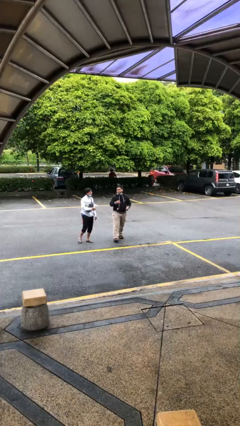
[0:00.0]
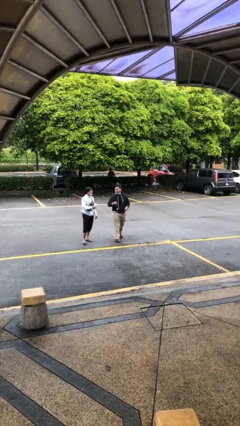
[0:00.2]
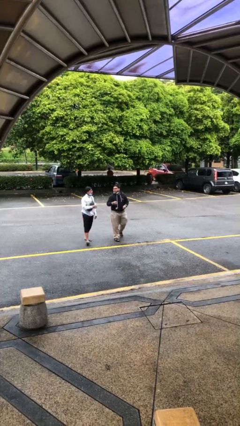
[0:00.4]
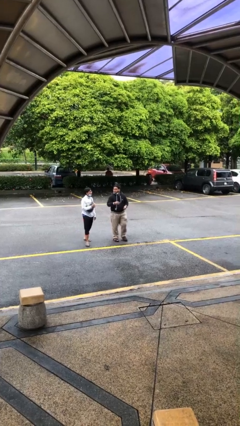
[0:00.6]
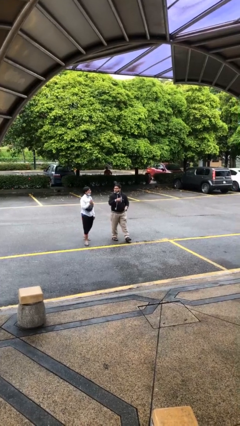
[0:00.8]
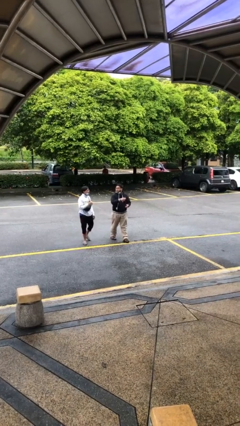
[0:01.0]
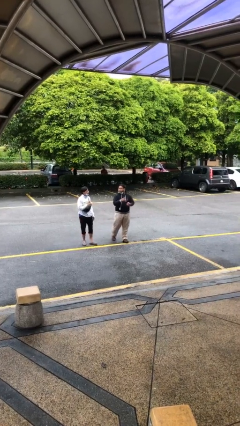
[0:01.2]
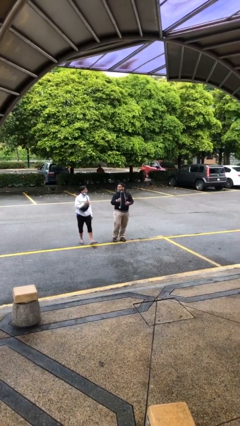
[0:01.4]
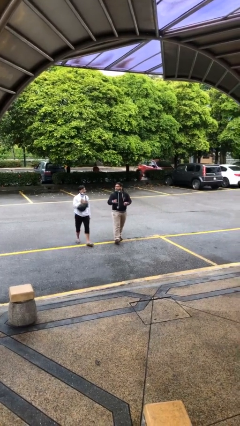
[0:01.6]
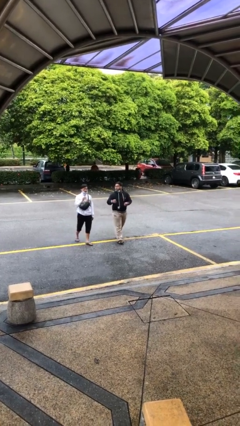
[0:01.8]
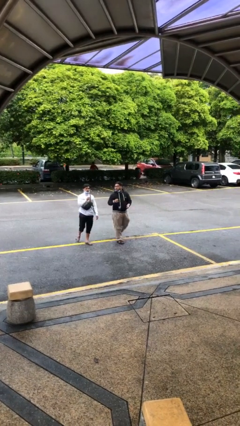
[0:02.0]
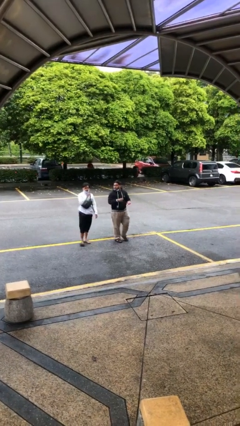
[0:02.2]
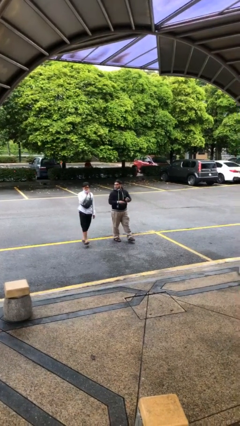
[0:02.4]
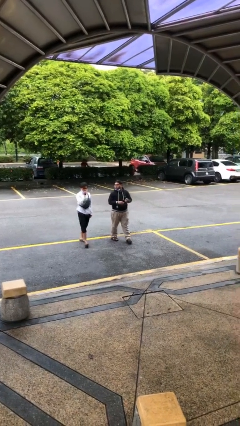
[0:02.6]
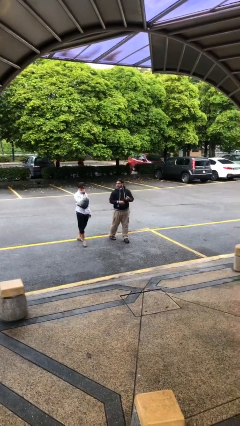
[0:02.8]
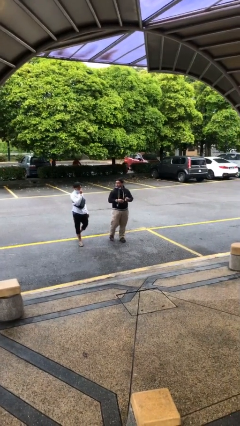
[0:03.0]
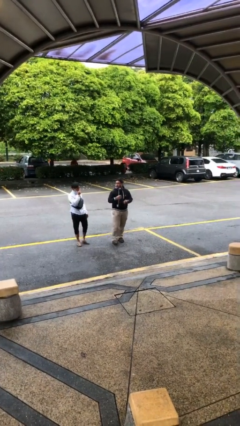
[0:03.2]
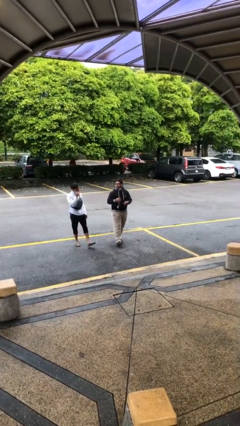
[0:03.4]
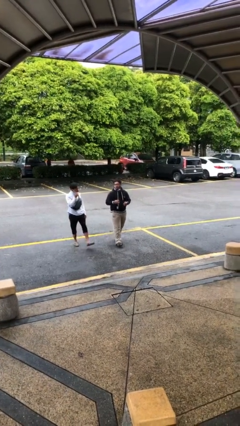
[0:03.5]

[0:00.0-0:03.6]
person talks to person

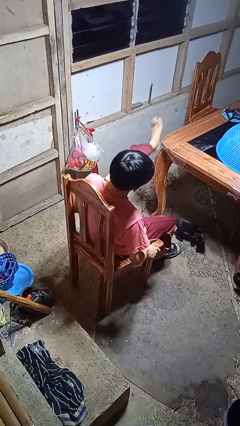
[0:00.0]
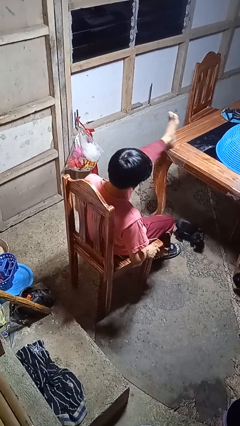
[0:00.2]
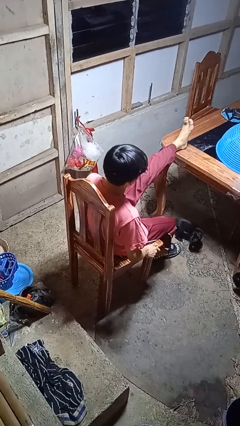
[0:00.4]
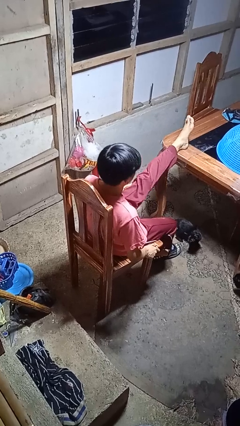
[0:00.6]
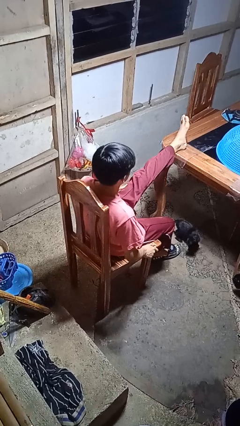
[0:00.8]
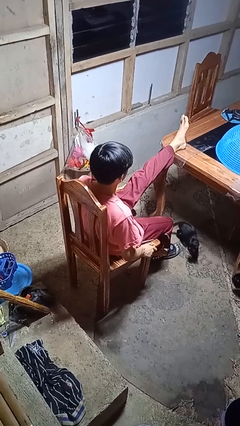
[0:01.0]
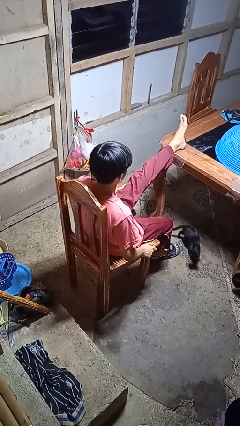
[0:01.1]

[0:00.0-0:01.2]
person puts feet up

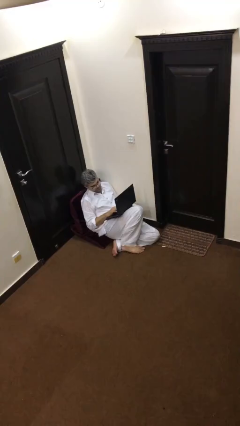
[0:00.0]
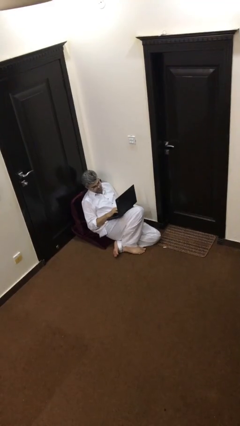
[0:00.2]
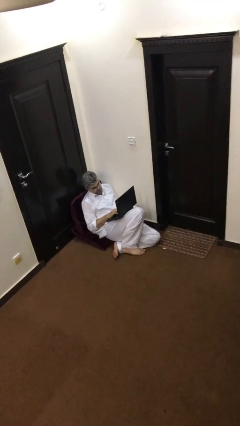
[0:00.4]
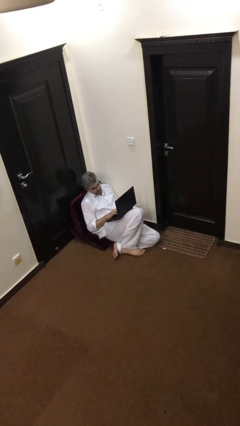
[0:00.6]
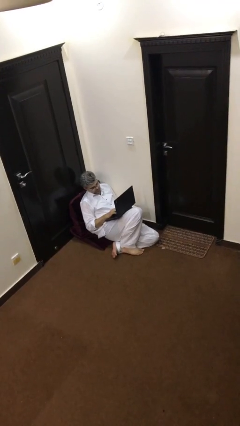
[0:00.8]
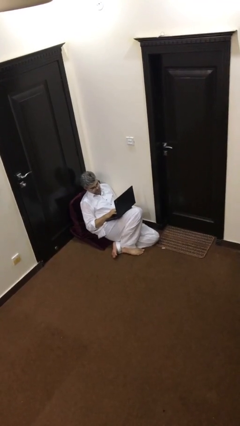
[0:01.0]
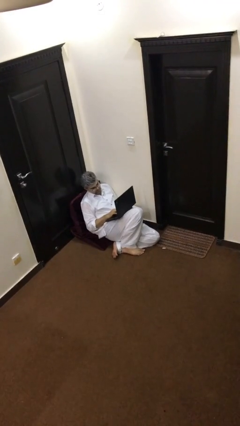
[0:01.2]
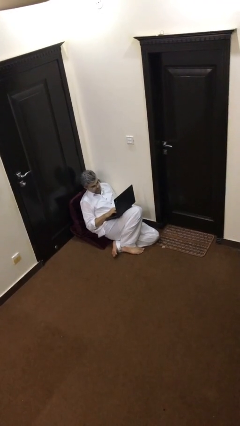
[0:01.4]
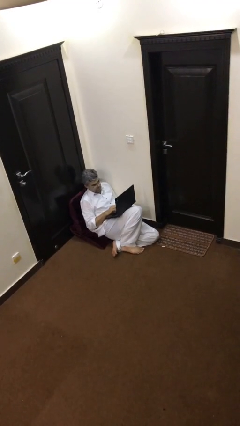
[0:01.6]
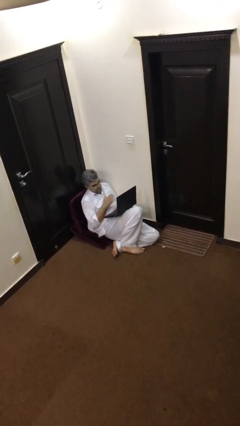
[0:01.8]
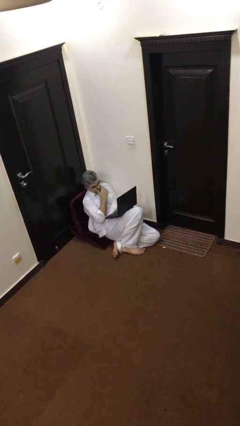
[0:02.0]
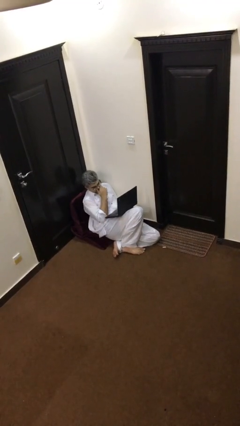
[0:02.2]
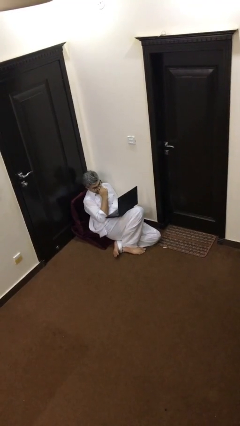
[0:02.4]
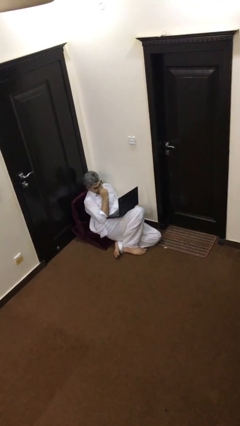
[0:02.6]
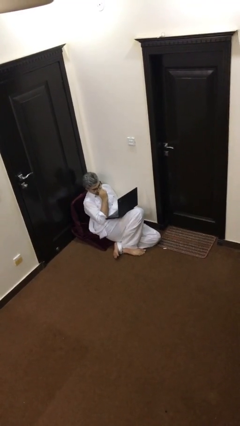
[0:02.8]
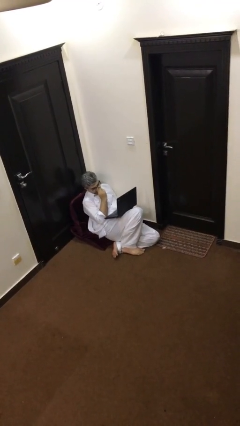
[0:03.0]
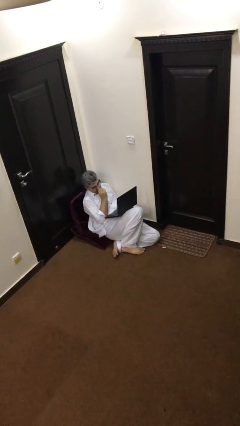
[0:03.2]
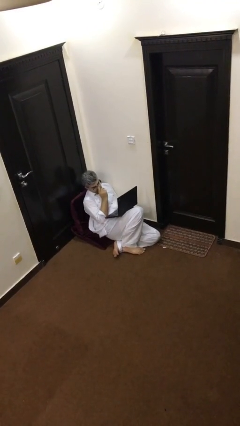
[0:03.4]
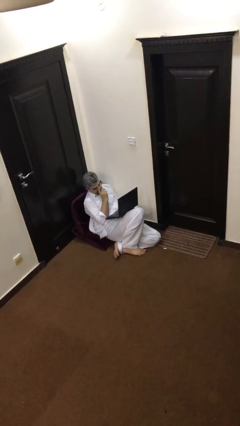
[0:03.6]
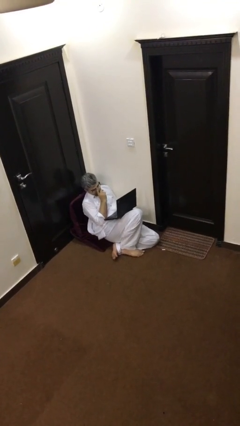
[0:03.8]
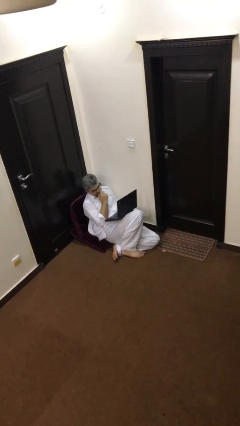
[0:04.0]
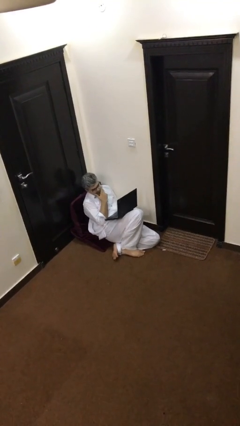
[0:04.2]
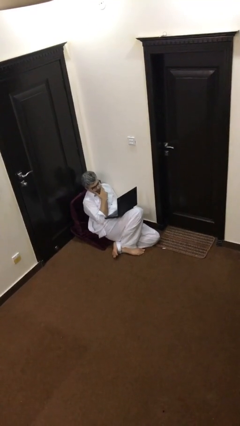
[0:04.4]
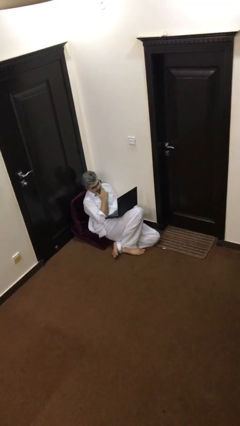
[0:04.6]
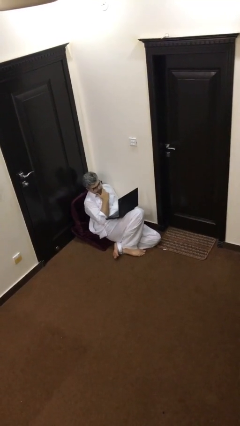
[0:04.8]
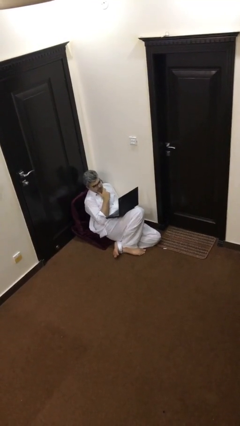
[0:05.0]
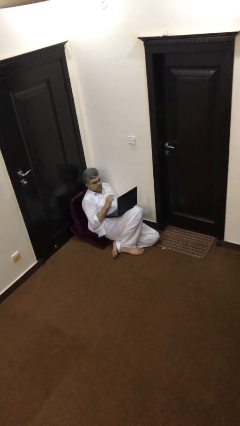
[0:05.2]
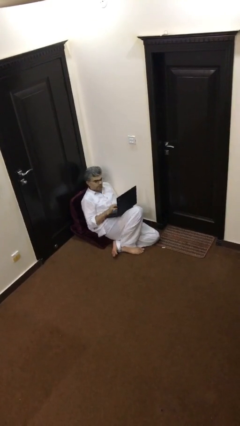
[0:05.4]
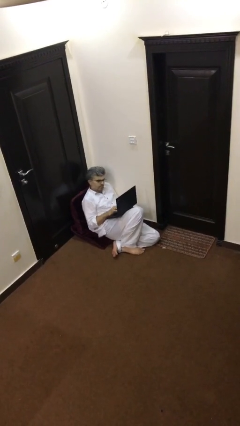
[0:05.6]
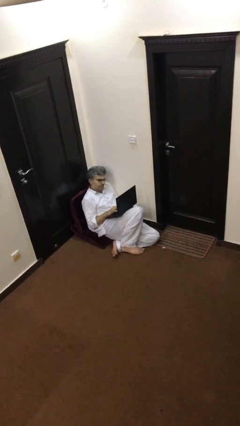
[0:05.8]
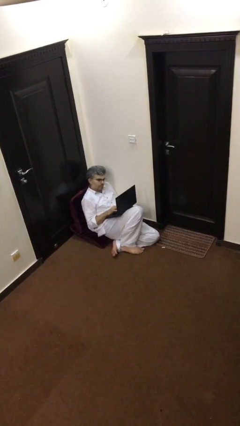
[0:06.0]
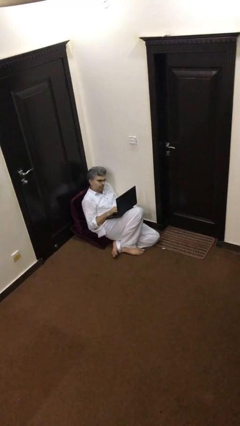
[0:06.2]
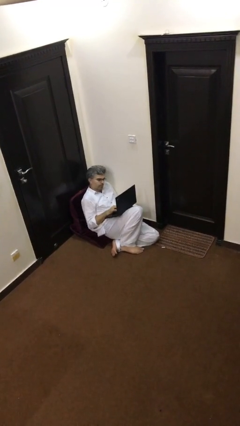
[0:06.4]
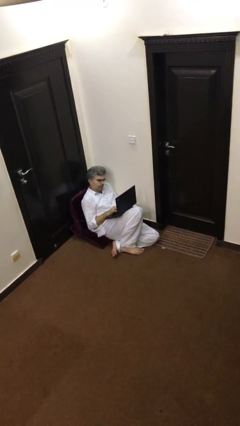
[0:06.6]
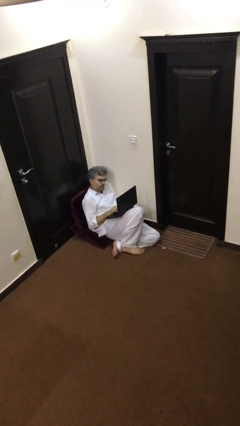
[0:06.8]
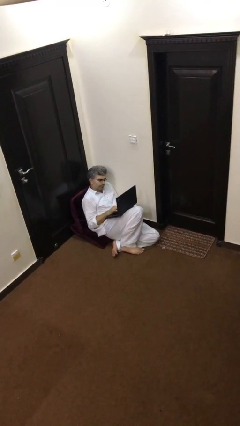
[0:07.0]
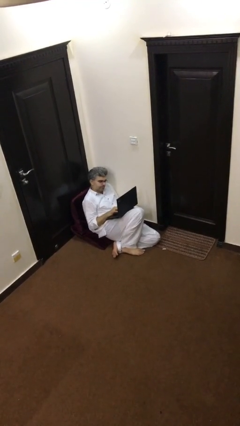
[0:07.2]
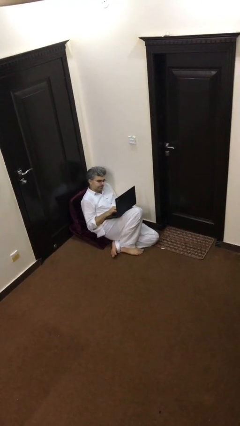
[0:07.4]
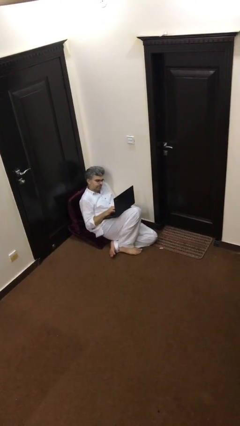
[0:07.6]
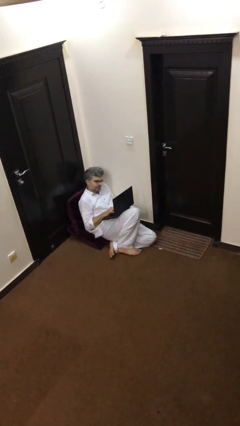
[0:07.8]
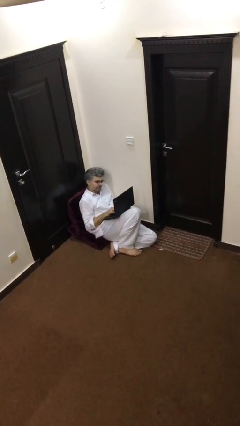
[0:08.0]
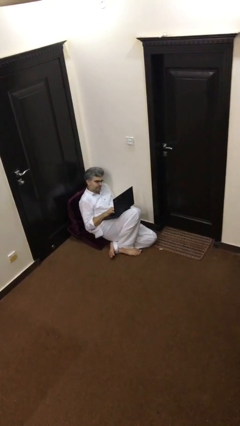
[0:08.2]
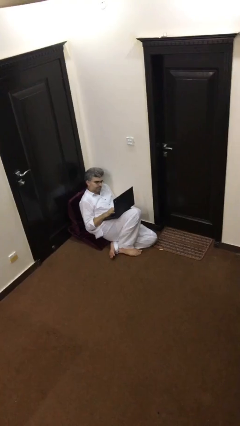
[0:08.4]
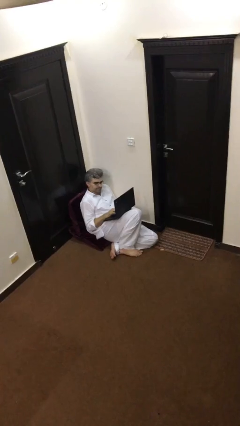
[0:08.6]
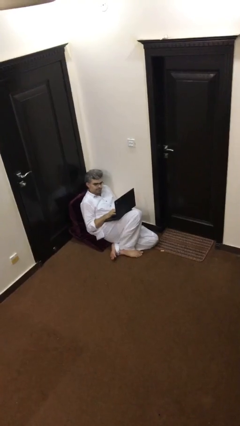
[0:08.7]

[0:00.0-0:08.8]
person interacts with laptop

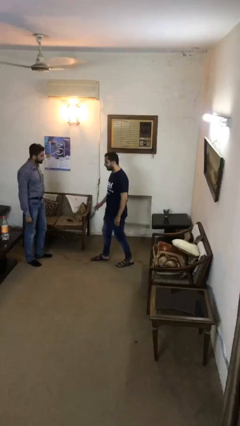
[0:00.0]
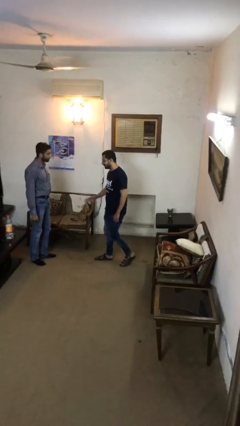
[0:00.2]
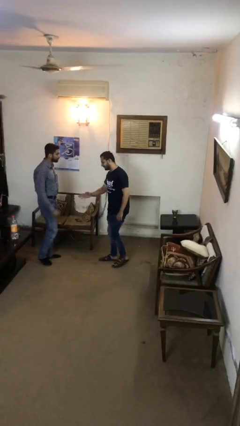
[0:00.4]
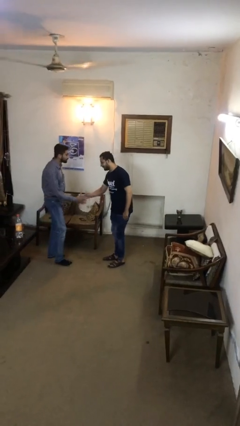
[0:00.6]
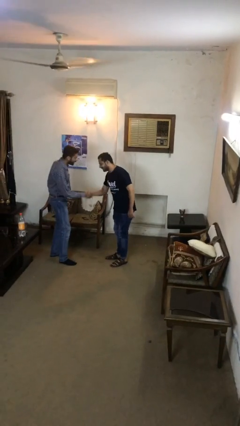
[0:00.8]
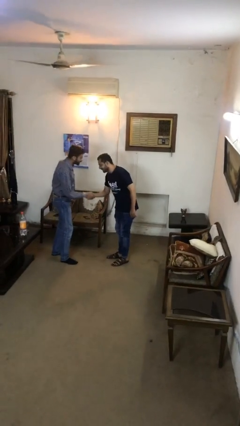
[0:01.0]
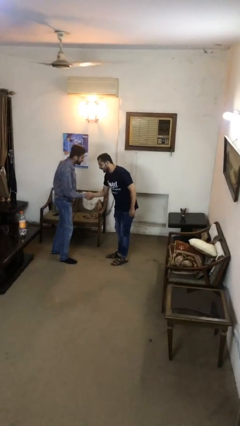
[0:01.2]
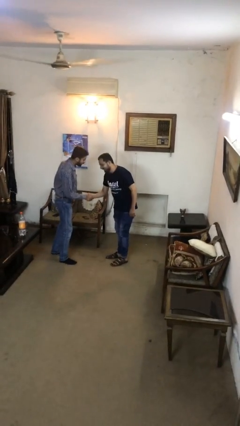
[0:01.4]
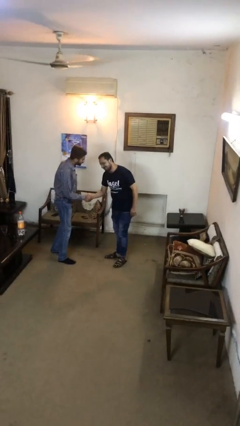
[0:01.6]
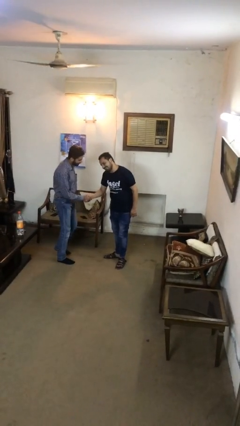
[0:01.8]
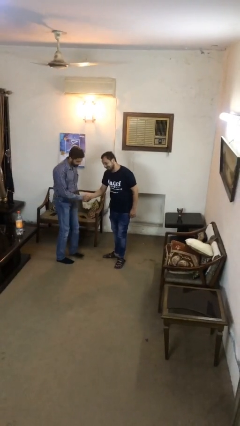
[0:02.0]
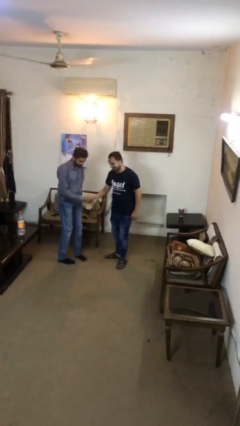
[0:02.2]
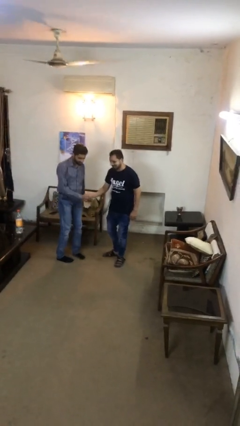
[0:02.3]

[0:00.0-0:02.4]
person shakes hand

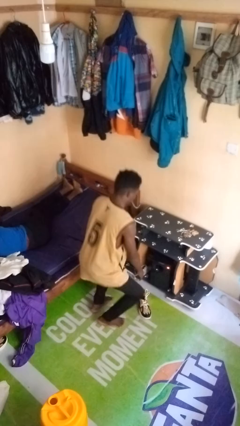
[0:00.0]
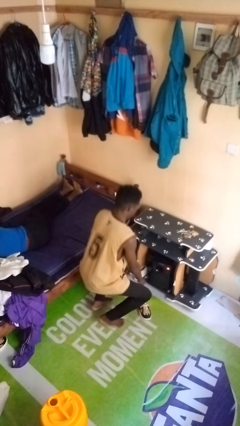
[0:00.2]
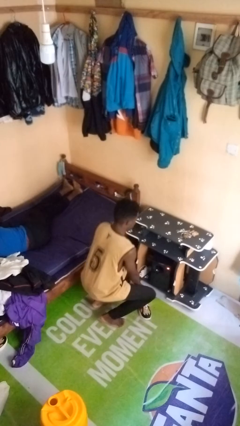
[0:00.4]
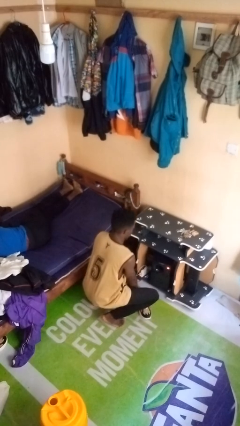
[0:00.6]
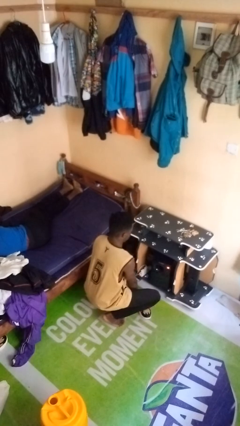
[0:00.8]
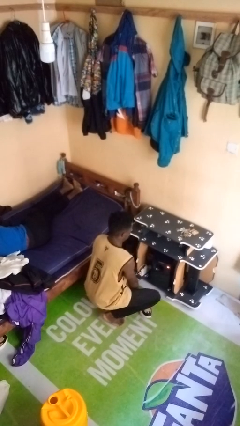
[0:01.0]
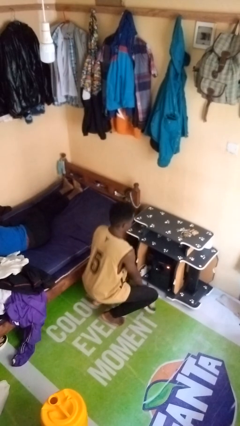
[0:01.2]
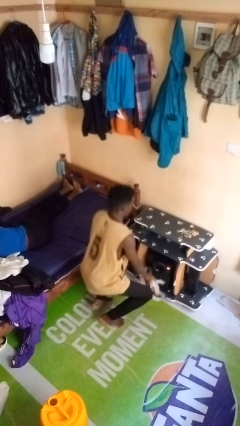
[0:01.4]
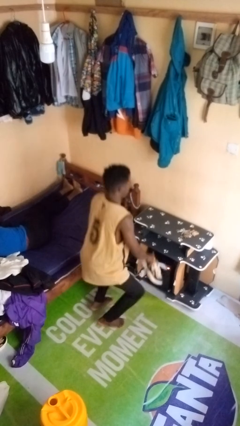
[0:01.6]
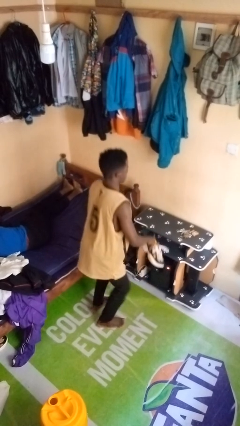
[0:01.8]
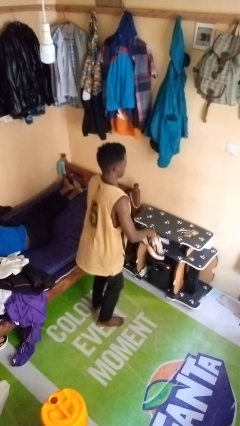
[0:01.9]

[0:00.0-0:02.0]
person picks up object from floor
